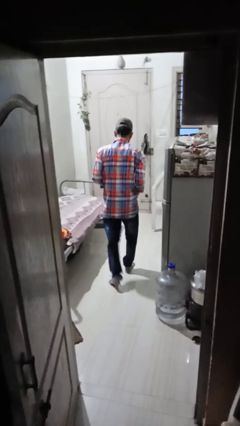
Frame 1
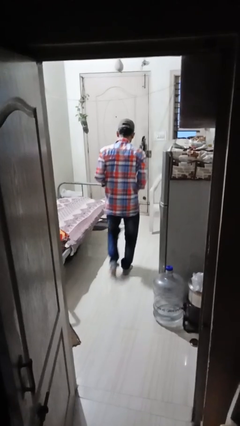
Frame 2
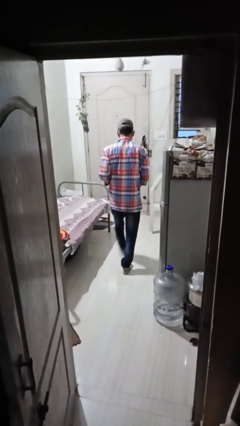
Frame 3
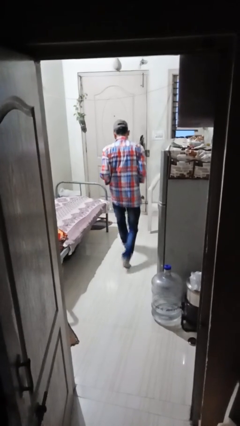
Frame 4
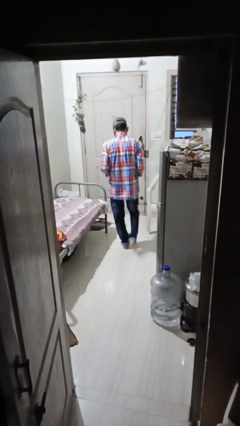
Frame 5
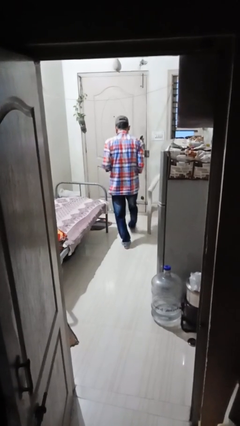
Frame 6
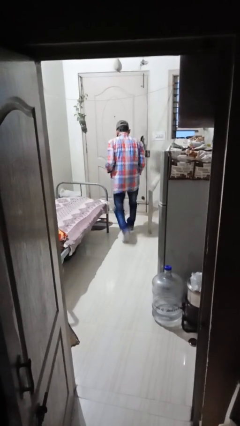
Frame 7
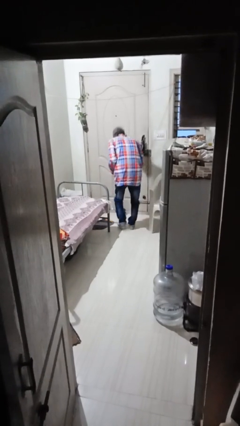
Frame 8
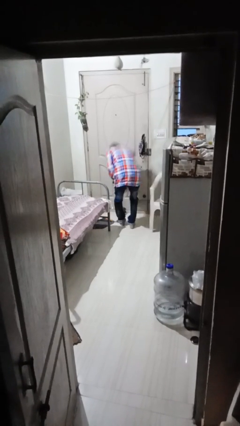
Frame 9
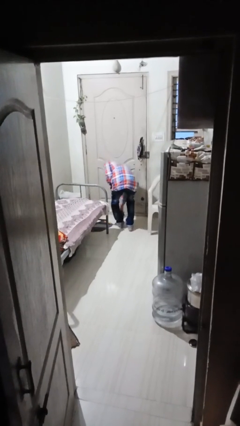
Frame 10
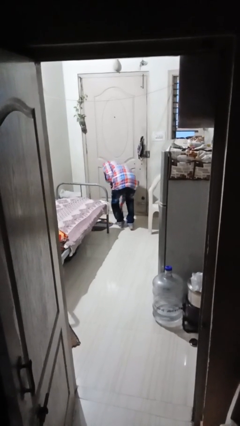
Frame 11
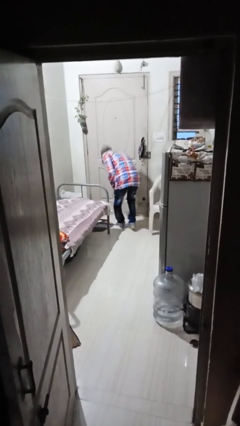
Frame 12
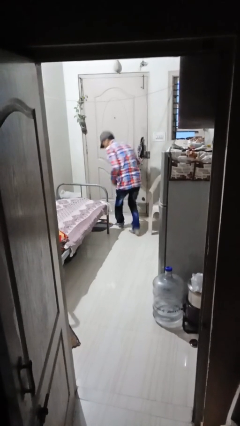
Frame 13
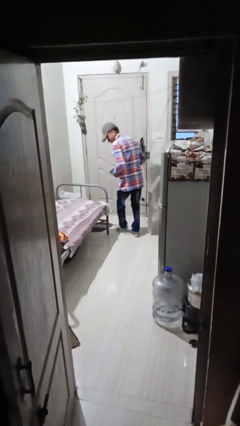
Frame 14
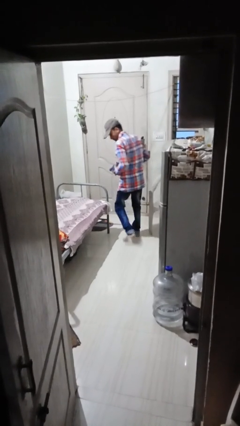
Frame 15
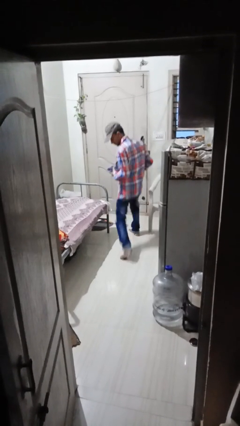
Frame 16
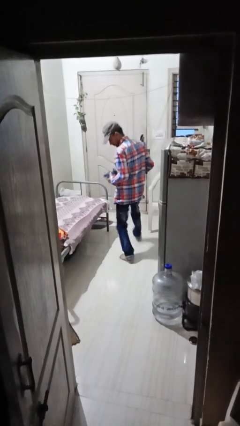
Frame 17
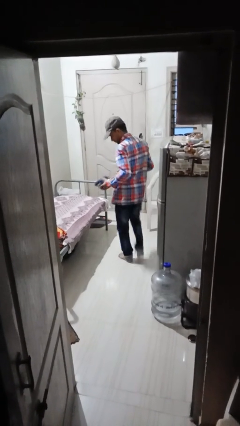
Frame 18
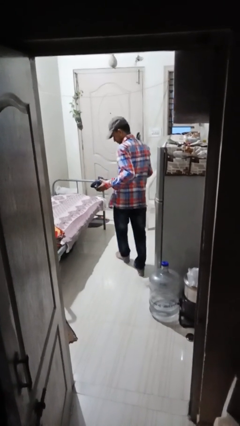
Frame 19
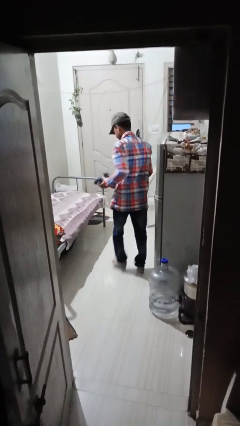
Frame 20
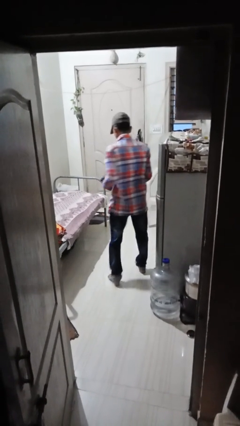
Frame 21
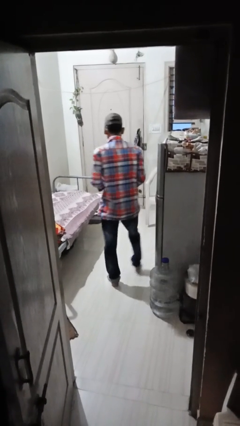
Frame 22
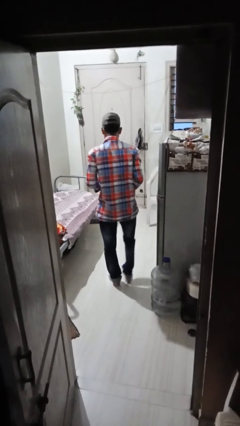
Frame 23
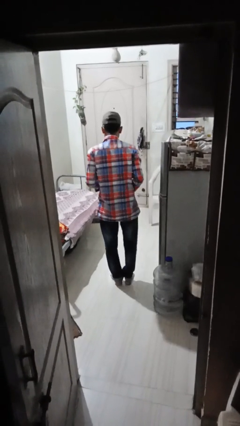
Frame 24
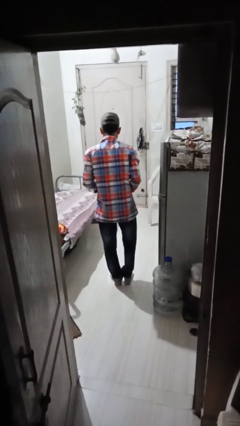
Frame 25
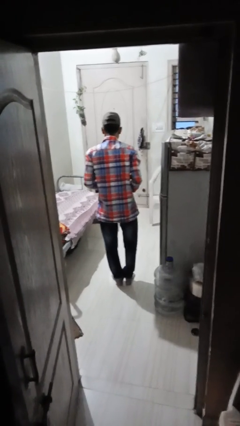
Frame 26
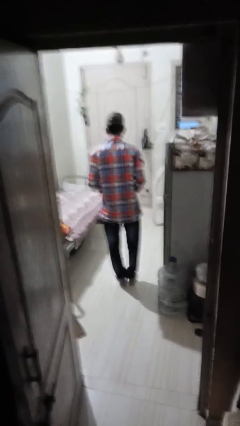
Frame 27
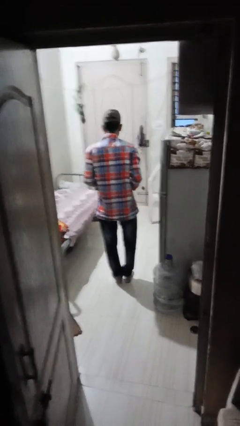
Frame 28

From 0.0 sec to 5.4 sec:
person picks up object from floor

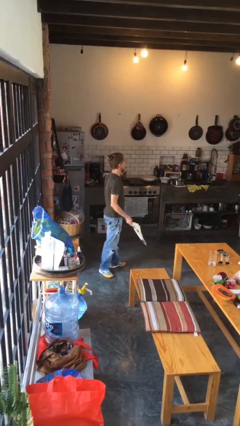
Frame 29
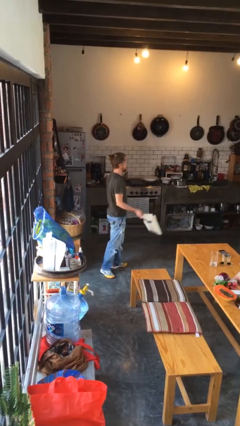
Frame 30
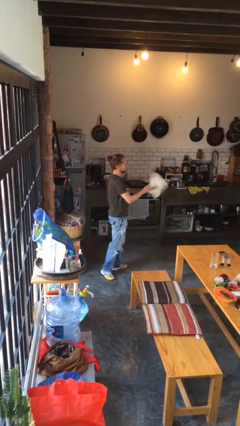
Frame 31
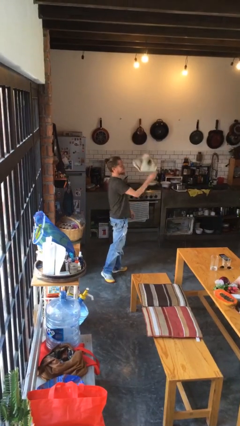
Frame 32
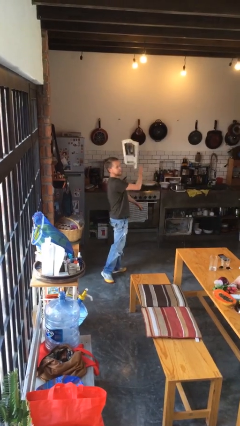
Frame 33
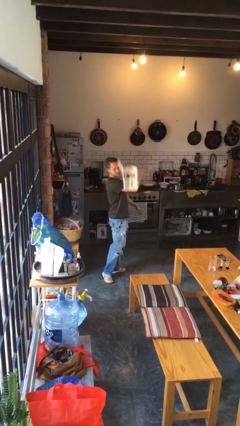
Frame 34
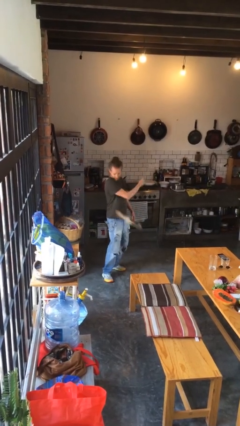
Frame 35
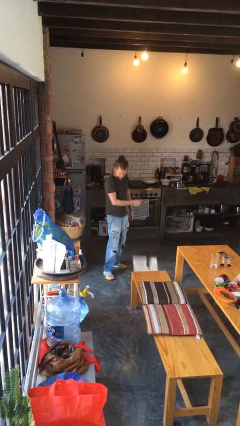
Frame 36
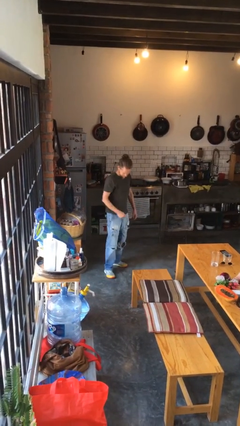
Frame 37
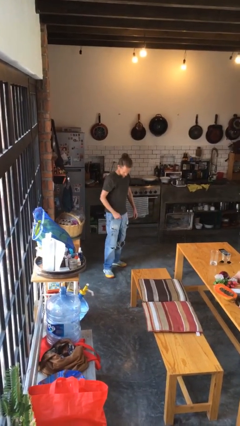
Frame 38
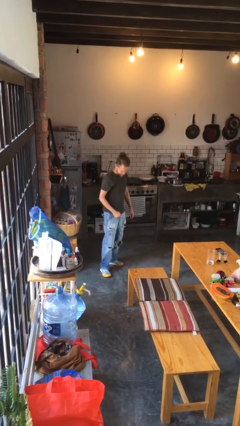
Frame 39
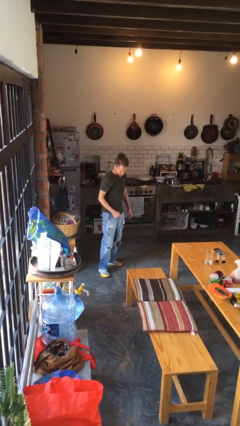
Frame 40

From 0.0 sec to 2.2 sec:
person drops object

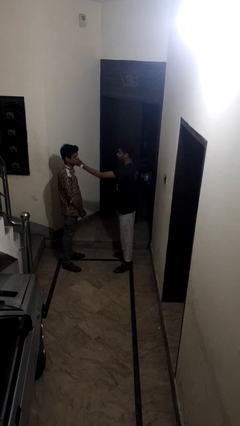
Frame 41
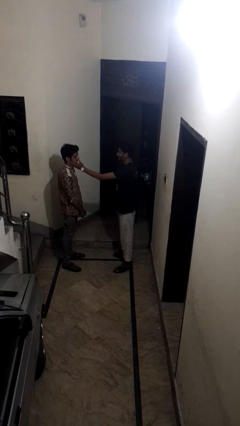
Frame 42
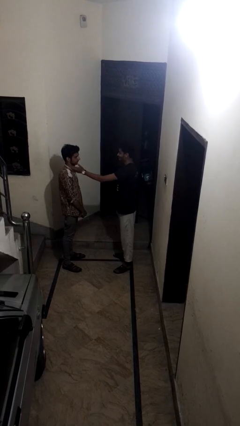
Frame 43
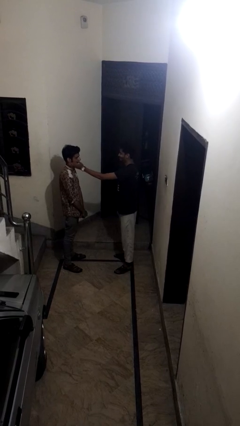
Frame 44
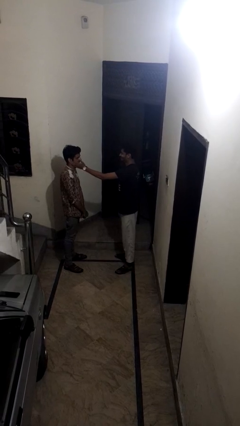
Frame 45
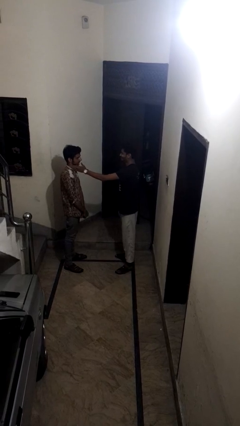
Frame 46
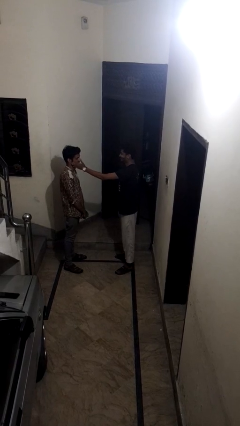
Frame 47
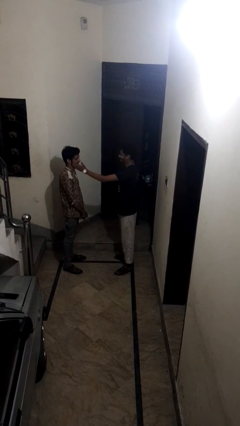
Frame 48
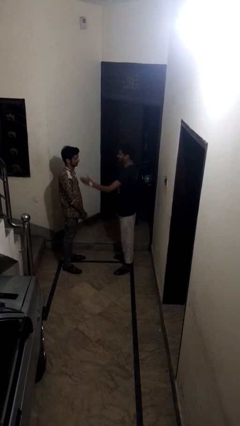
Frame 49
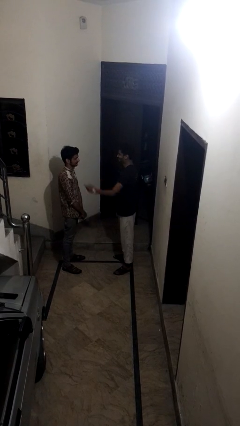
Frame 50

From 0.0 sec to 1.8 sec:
person touches face of person

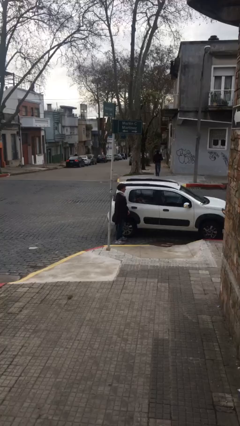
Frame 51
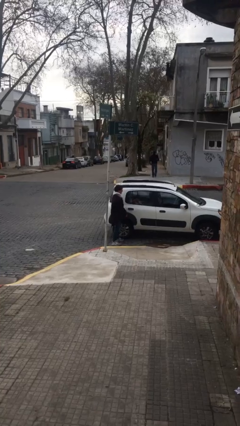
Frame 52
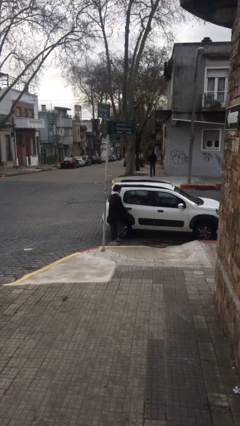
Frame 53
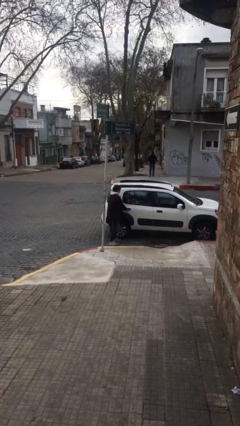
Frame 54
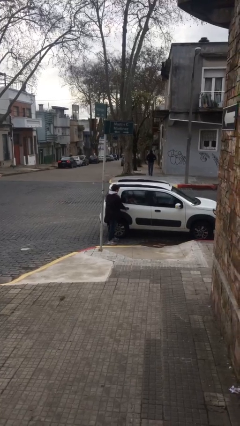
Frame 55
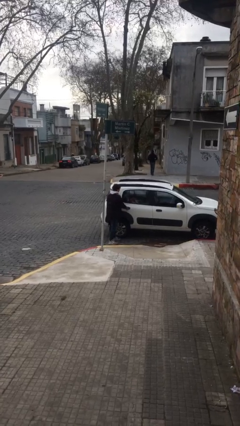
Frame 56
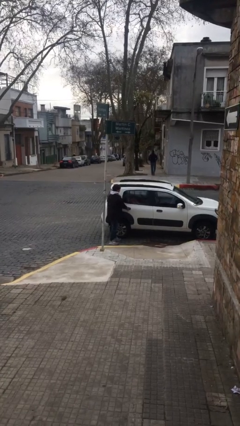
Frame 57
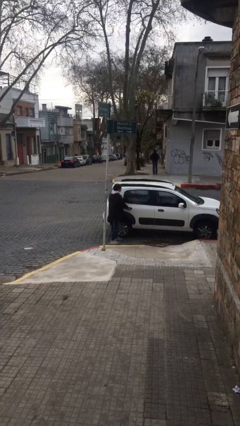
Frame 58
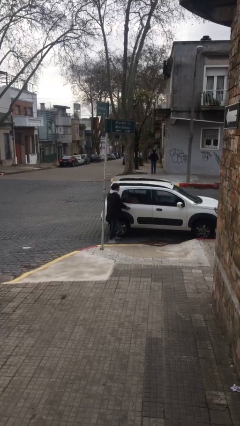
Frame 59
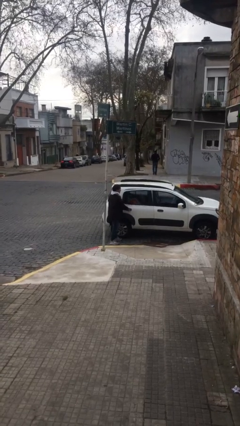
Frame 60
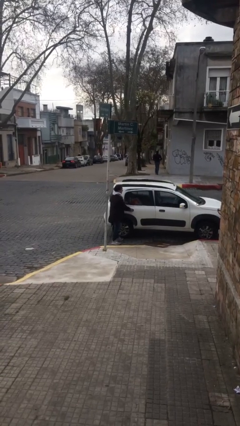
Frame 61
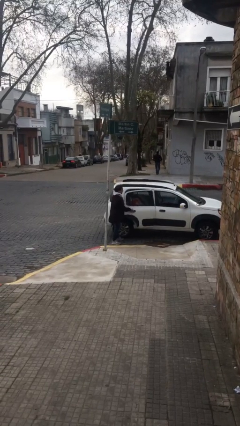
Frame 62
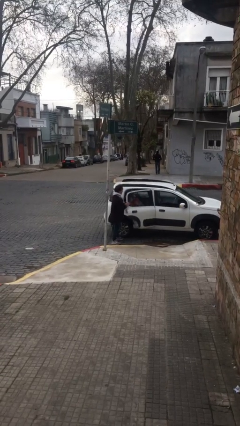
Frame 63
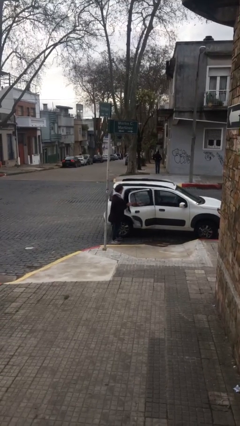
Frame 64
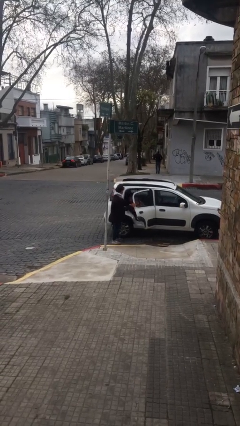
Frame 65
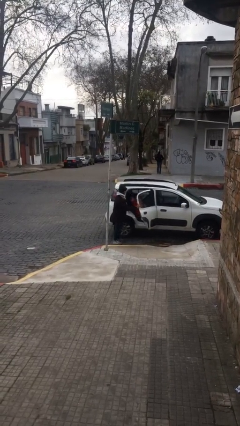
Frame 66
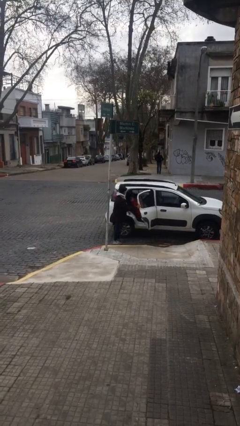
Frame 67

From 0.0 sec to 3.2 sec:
person opens car door

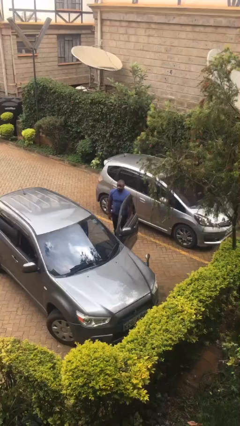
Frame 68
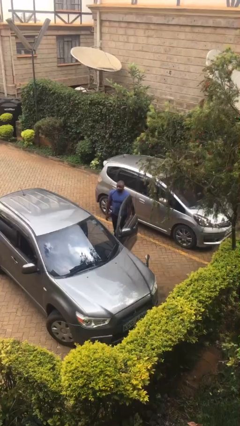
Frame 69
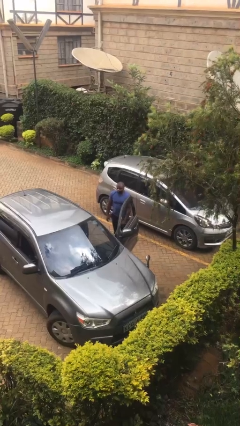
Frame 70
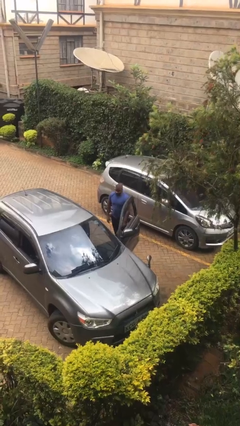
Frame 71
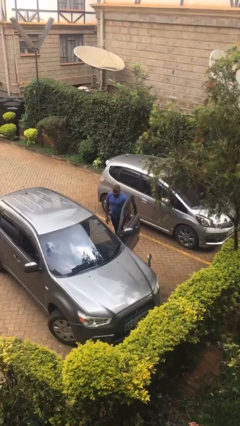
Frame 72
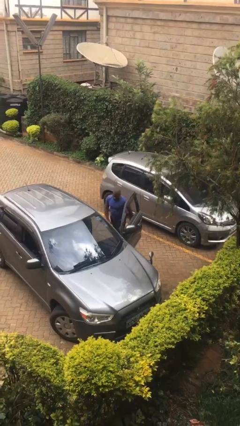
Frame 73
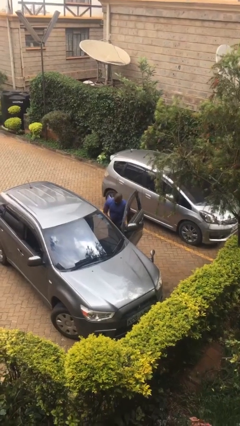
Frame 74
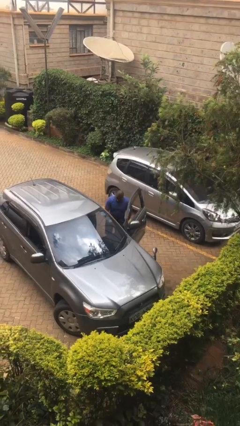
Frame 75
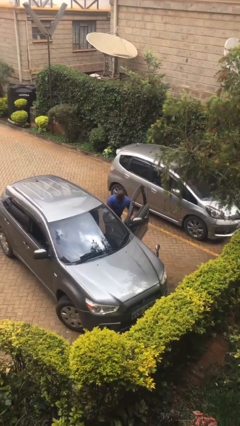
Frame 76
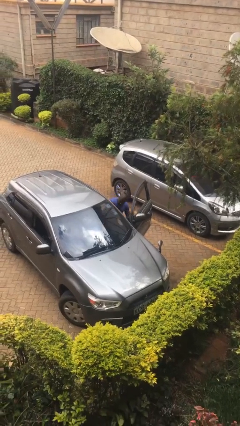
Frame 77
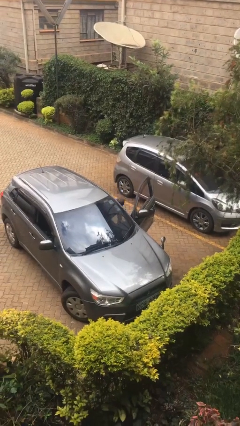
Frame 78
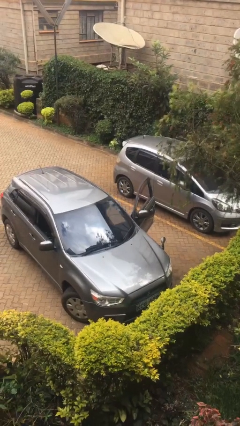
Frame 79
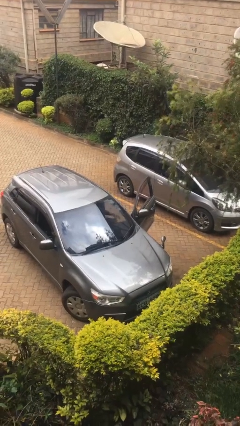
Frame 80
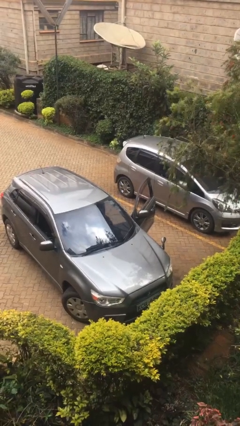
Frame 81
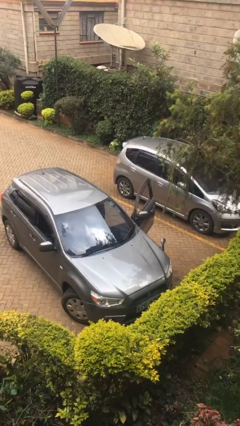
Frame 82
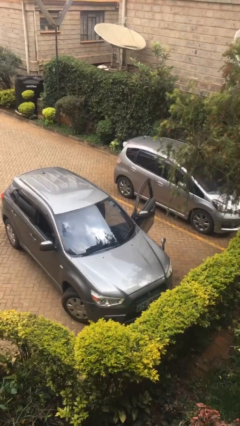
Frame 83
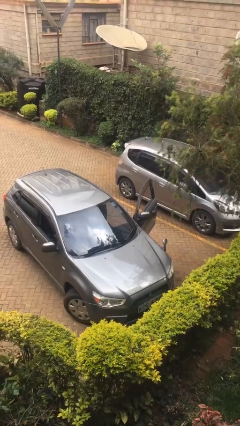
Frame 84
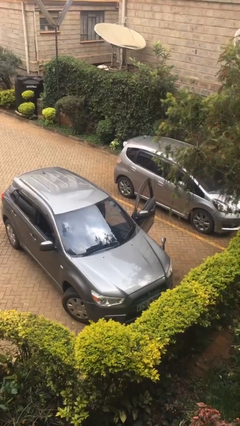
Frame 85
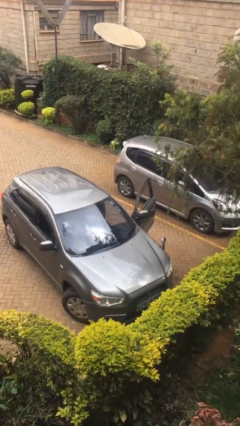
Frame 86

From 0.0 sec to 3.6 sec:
person enters car

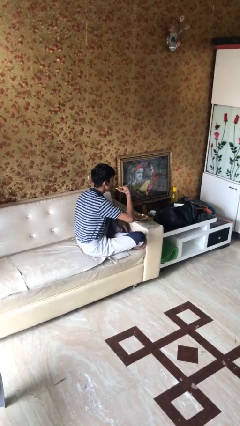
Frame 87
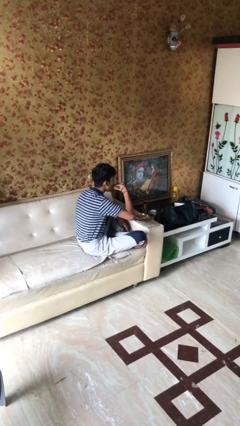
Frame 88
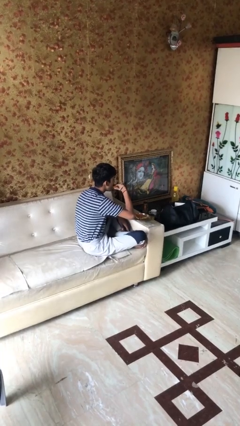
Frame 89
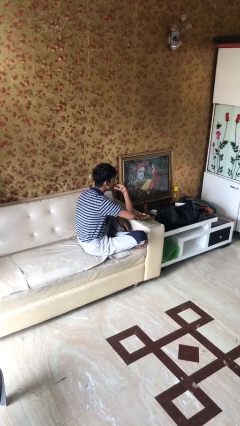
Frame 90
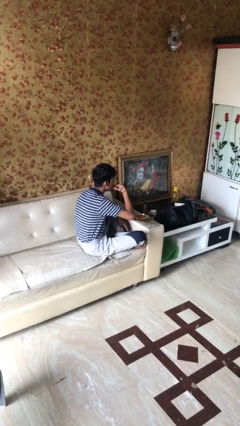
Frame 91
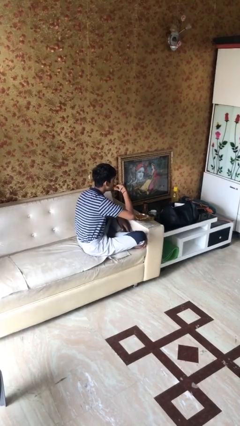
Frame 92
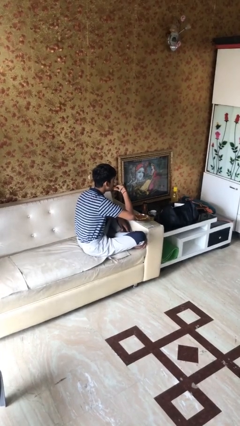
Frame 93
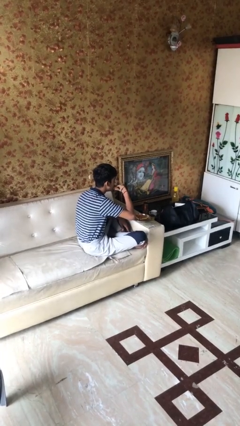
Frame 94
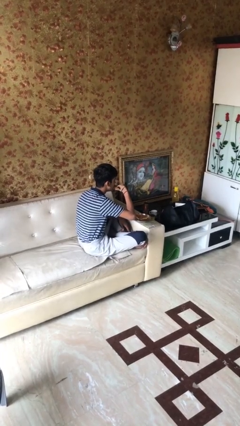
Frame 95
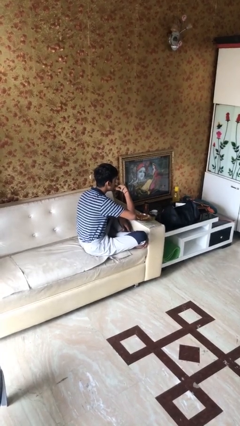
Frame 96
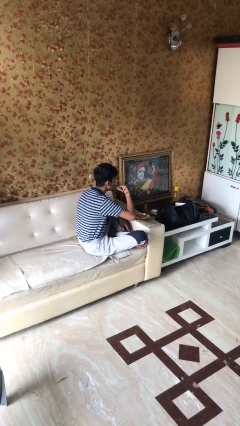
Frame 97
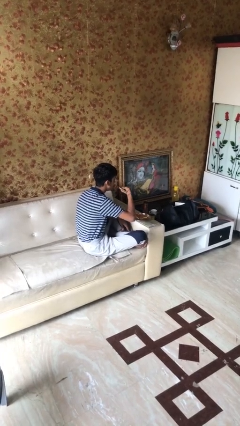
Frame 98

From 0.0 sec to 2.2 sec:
person eats with hands
